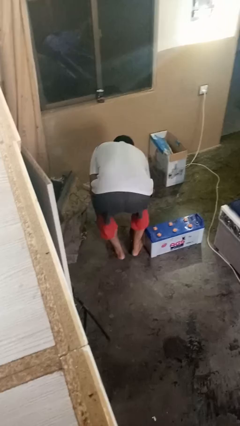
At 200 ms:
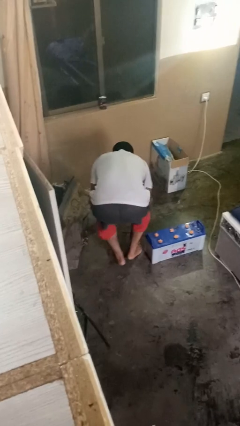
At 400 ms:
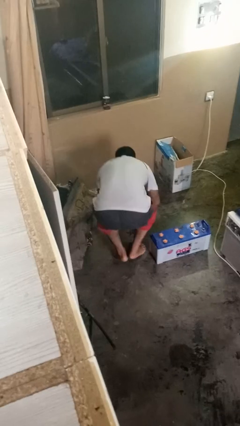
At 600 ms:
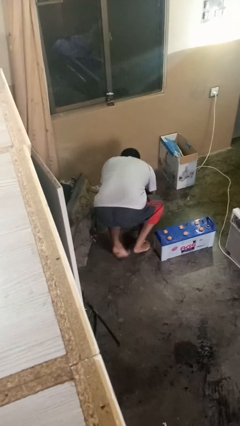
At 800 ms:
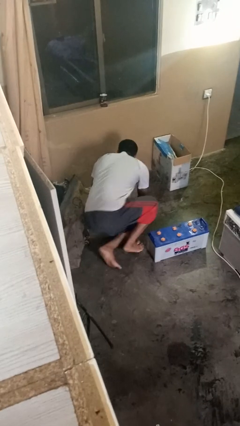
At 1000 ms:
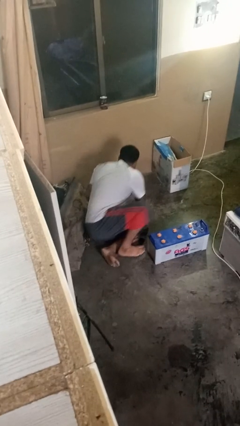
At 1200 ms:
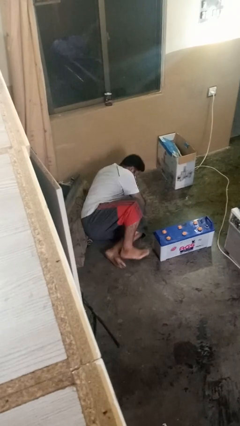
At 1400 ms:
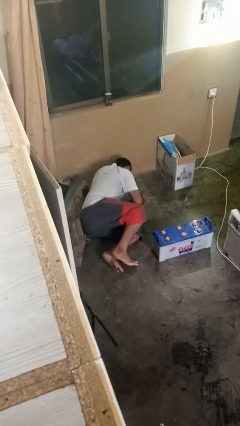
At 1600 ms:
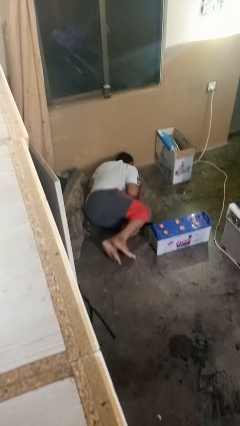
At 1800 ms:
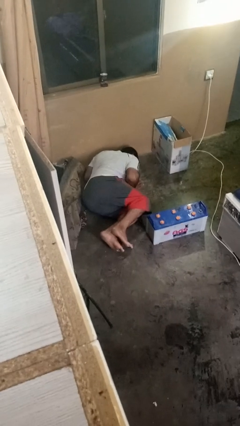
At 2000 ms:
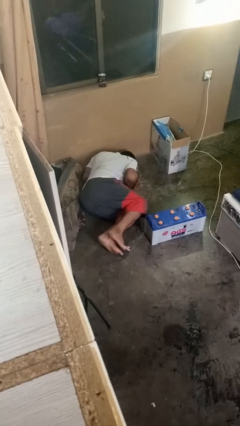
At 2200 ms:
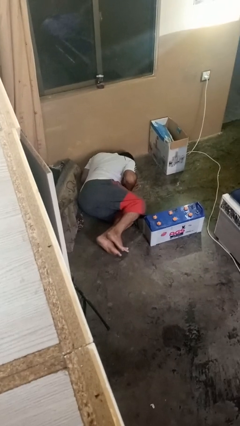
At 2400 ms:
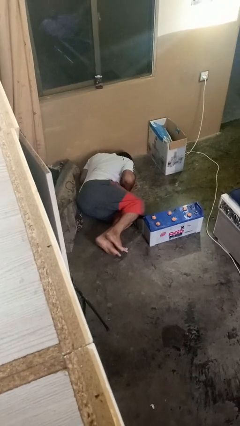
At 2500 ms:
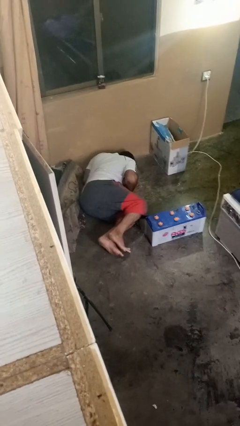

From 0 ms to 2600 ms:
person lies down on floor

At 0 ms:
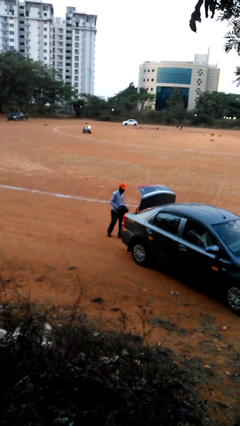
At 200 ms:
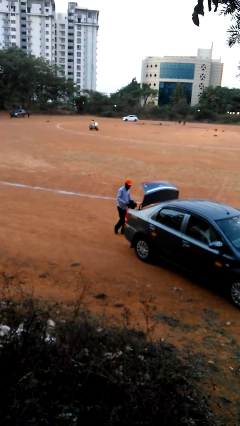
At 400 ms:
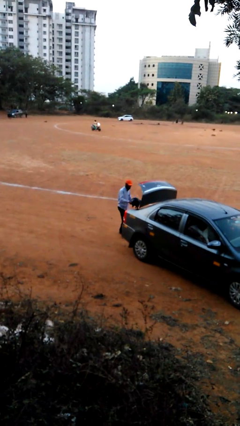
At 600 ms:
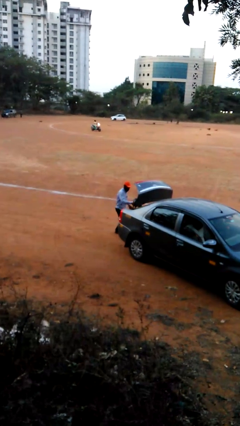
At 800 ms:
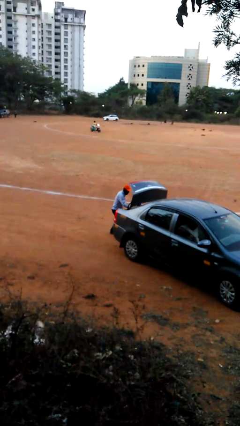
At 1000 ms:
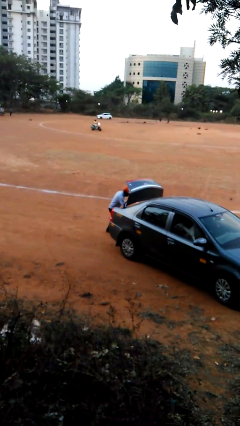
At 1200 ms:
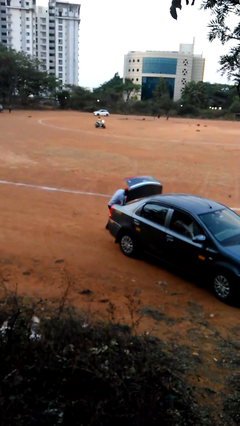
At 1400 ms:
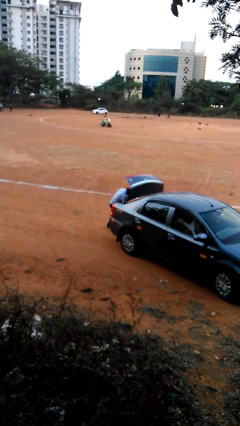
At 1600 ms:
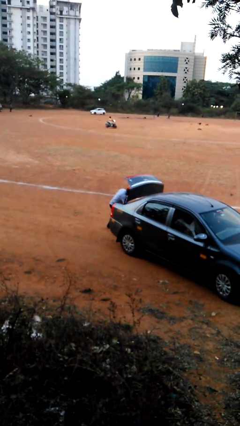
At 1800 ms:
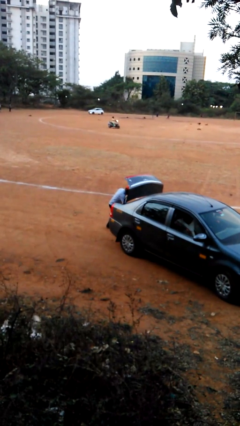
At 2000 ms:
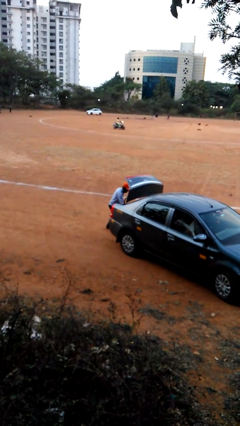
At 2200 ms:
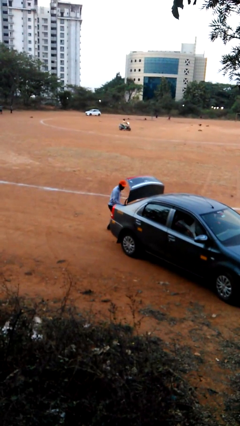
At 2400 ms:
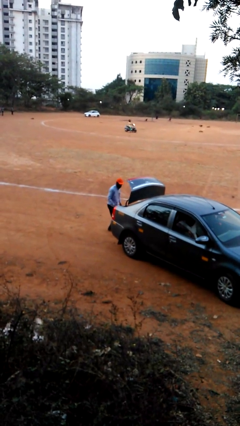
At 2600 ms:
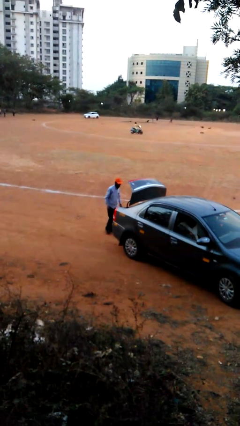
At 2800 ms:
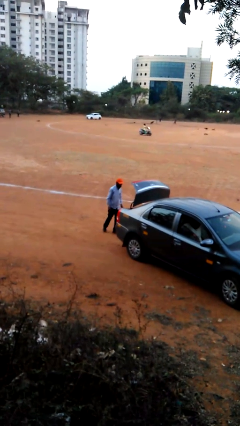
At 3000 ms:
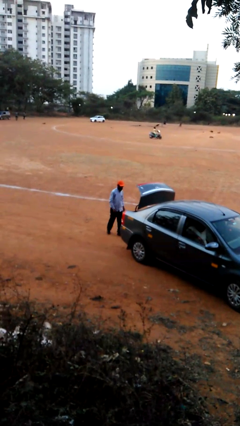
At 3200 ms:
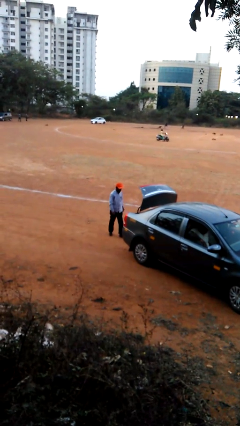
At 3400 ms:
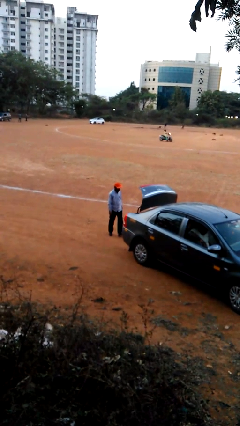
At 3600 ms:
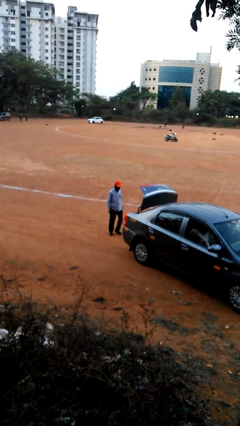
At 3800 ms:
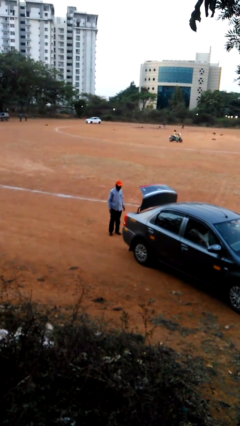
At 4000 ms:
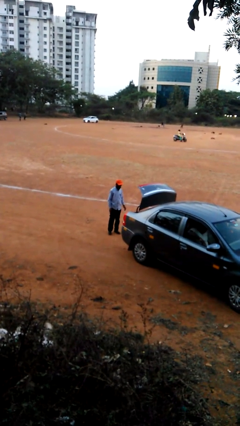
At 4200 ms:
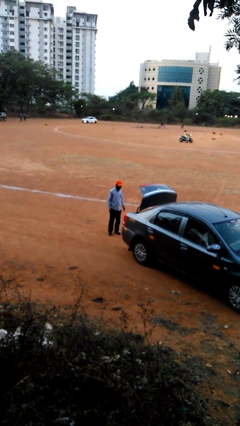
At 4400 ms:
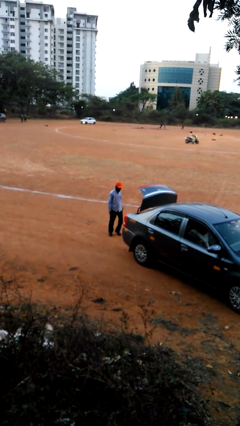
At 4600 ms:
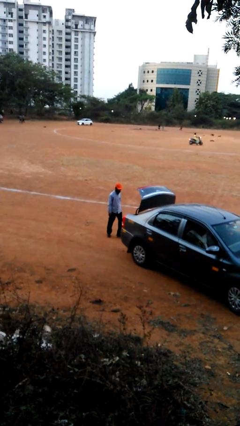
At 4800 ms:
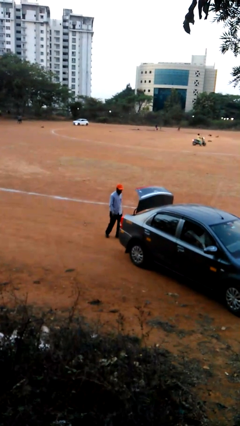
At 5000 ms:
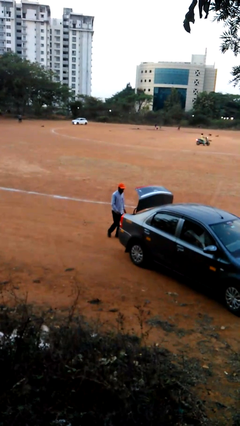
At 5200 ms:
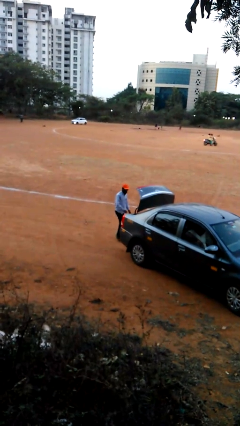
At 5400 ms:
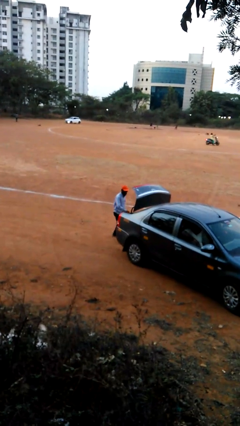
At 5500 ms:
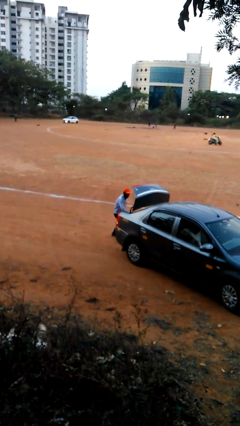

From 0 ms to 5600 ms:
person loads car

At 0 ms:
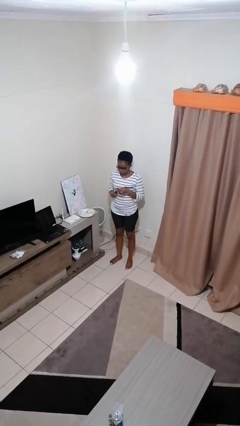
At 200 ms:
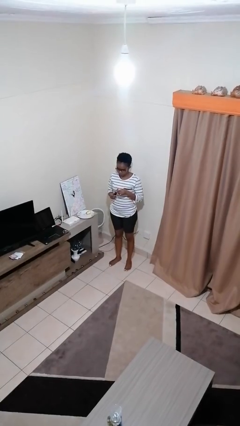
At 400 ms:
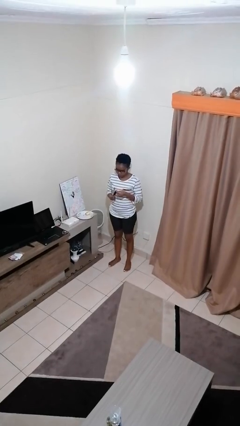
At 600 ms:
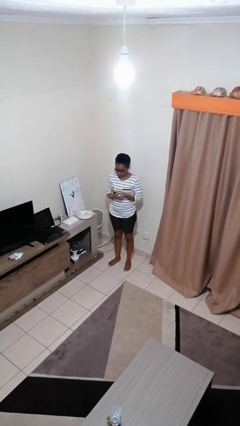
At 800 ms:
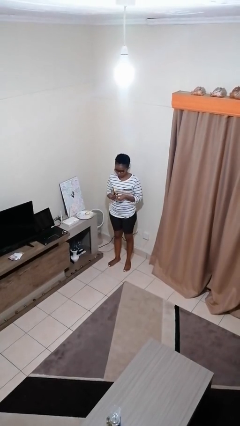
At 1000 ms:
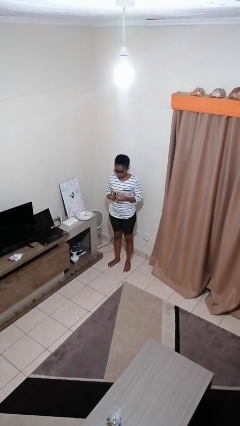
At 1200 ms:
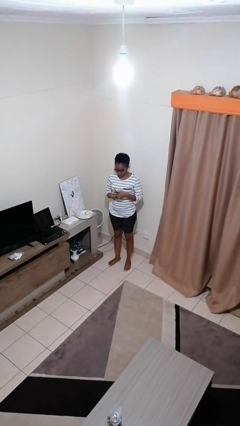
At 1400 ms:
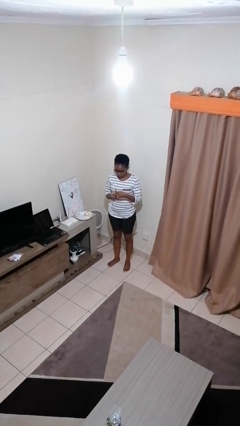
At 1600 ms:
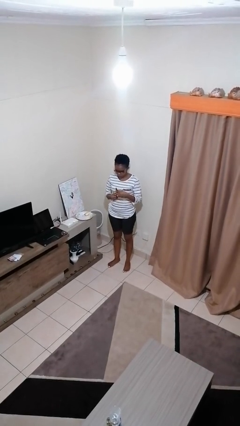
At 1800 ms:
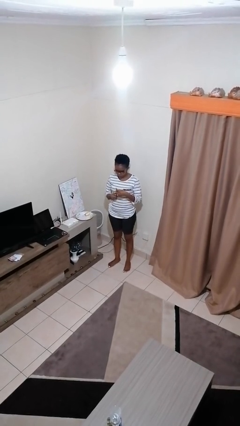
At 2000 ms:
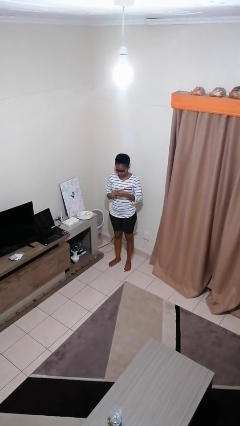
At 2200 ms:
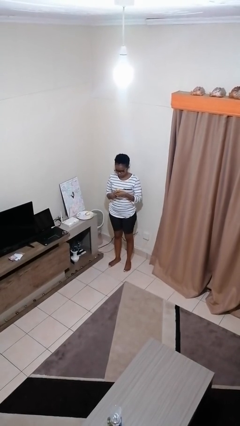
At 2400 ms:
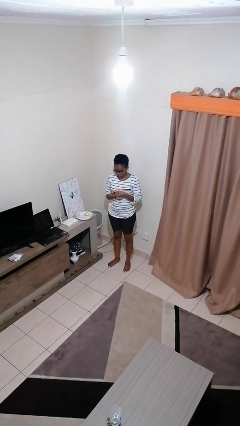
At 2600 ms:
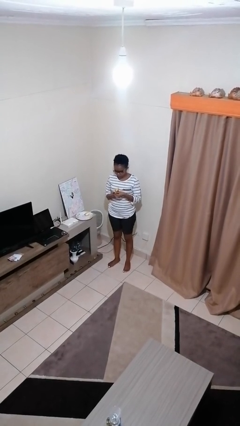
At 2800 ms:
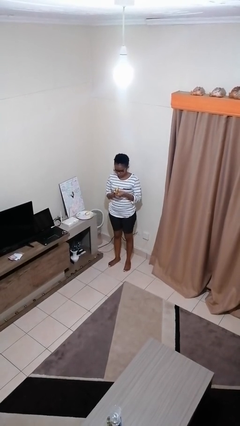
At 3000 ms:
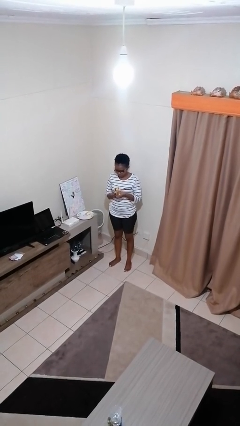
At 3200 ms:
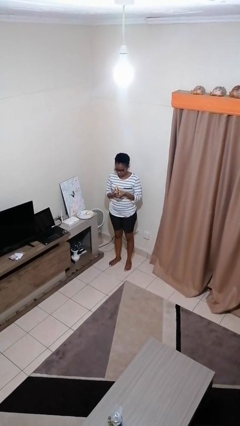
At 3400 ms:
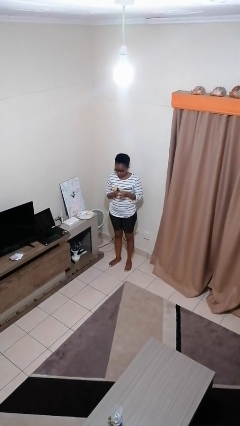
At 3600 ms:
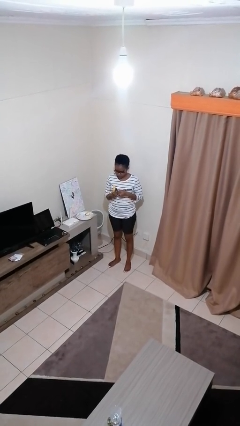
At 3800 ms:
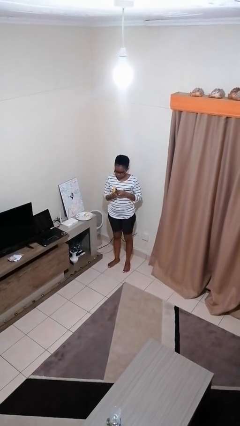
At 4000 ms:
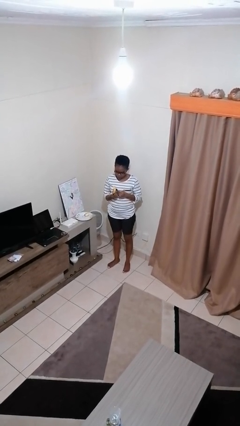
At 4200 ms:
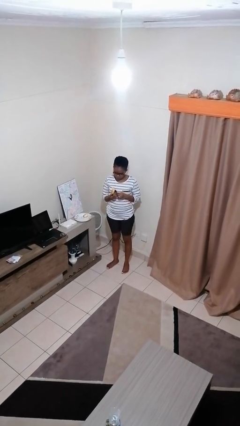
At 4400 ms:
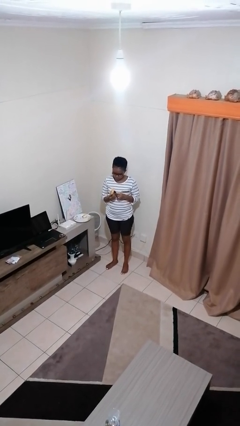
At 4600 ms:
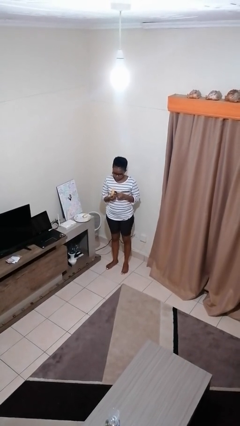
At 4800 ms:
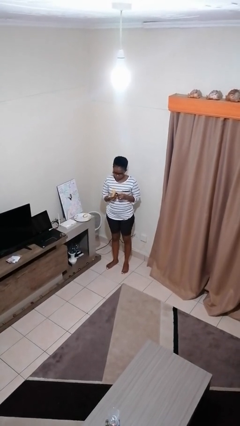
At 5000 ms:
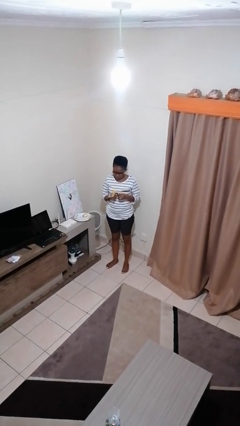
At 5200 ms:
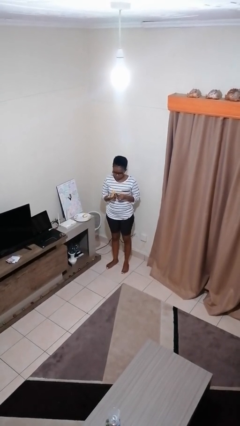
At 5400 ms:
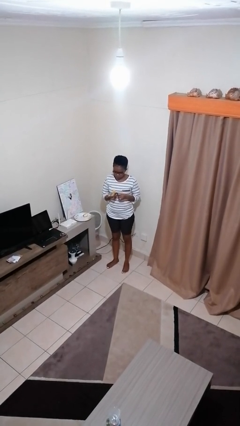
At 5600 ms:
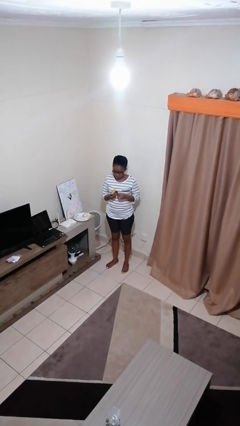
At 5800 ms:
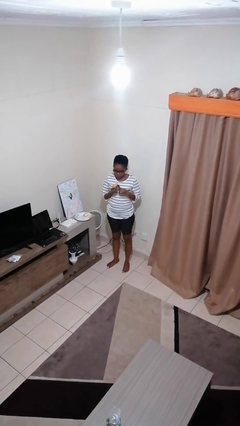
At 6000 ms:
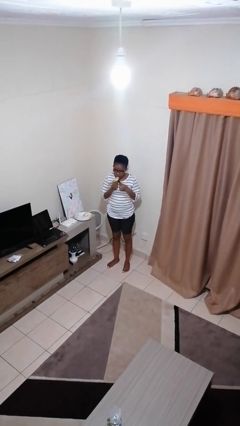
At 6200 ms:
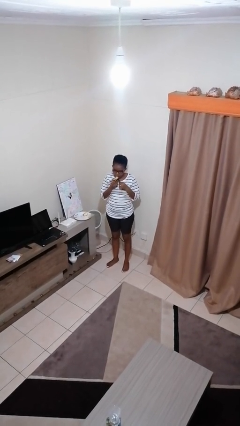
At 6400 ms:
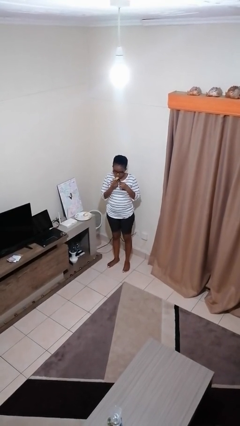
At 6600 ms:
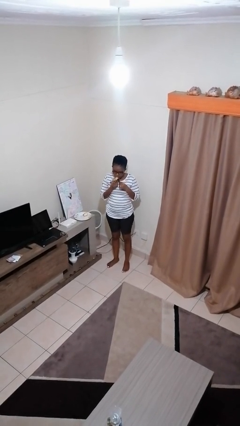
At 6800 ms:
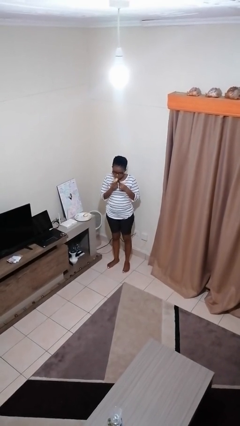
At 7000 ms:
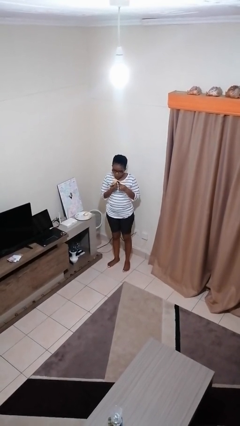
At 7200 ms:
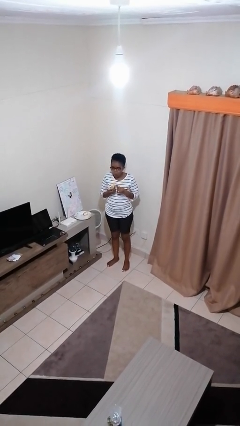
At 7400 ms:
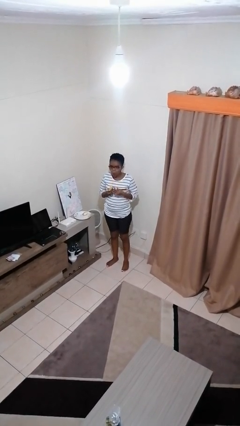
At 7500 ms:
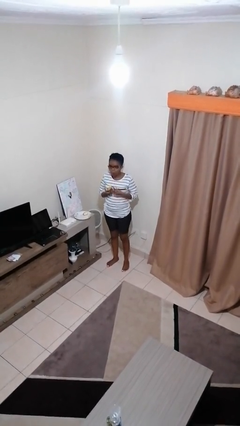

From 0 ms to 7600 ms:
person eats banana

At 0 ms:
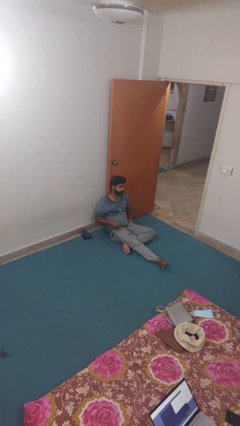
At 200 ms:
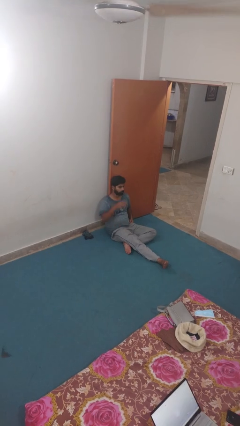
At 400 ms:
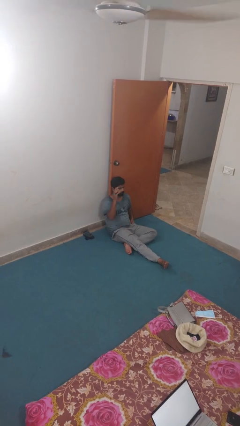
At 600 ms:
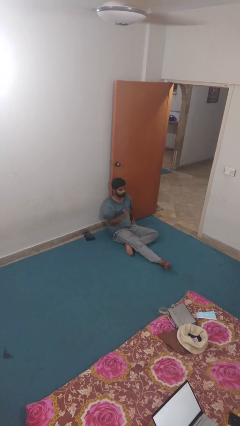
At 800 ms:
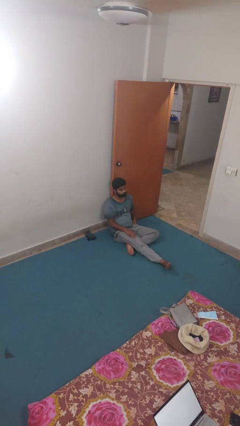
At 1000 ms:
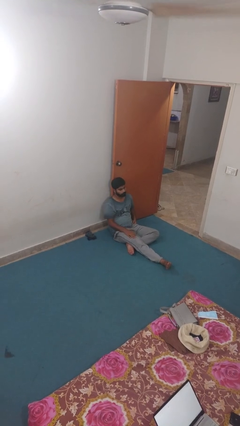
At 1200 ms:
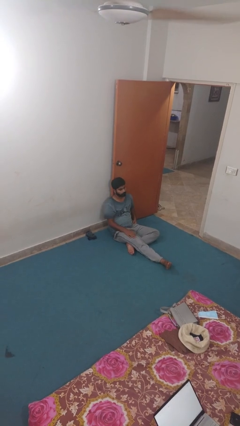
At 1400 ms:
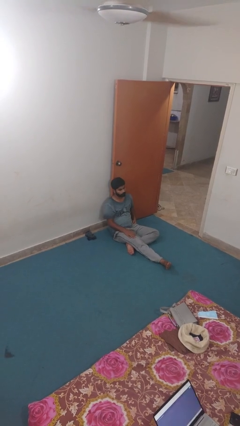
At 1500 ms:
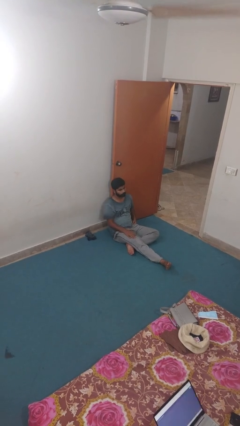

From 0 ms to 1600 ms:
person slaps hands on thighs

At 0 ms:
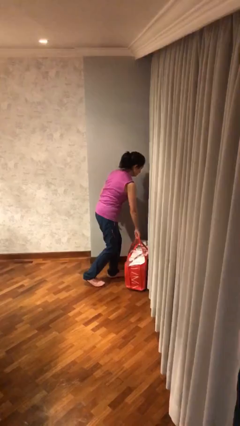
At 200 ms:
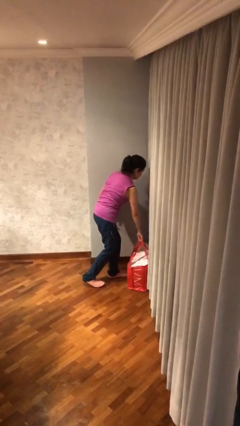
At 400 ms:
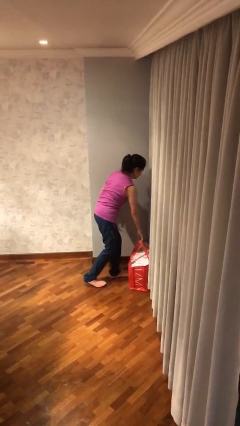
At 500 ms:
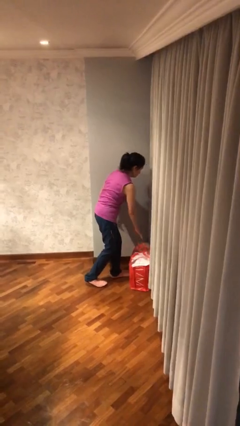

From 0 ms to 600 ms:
person puts down object on floor
